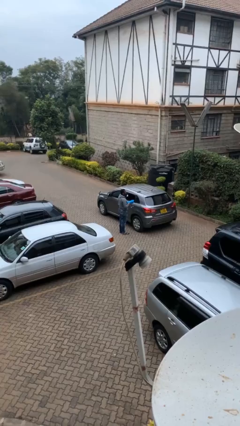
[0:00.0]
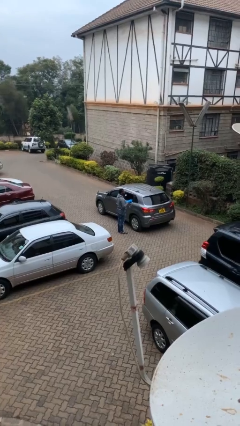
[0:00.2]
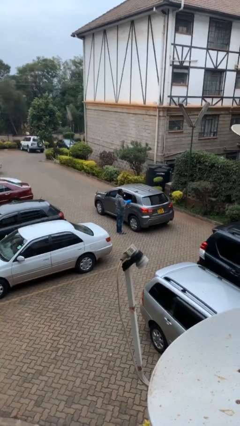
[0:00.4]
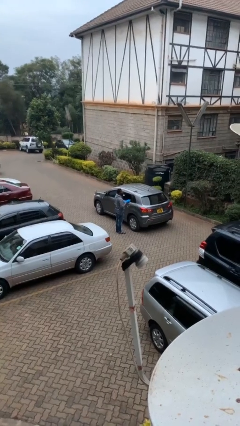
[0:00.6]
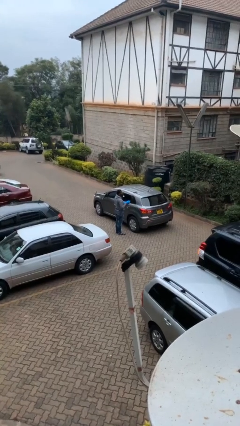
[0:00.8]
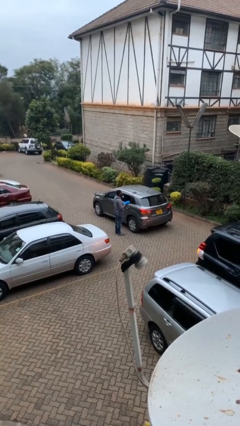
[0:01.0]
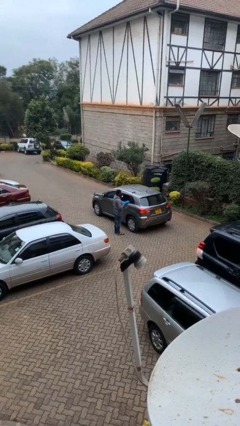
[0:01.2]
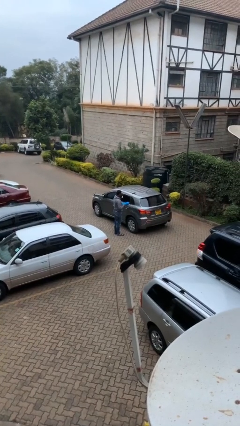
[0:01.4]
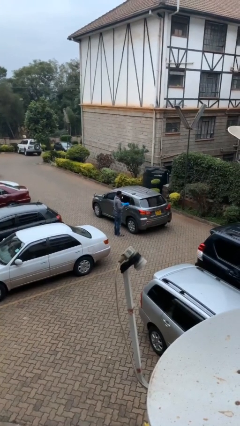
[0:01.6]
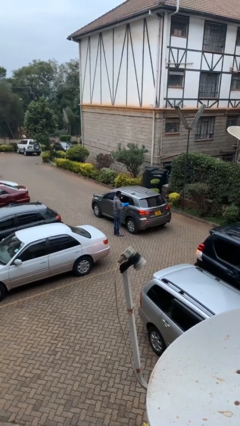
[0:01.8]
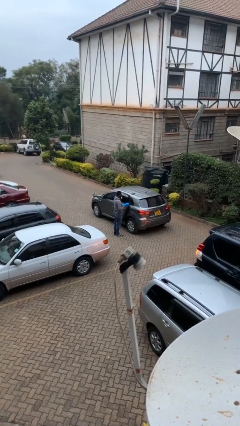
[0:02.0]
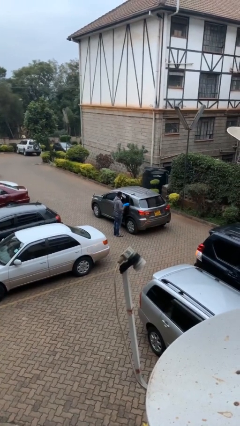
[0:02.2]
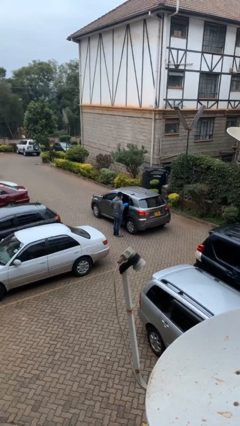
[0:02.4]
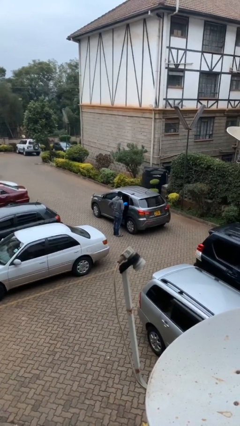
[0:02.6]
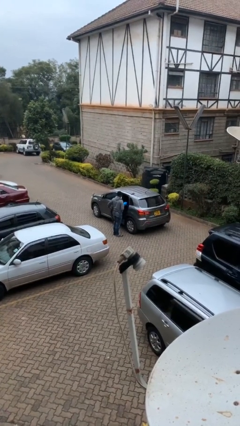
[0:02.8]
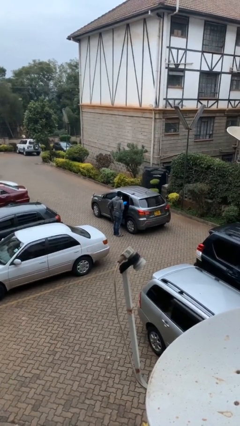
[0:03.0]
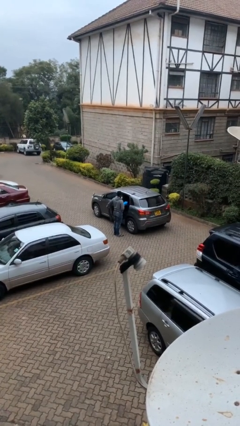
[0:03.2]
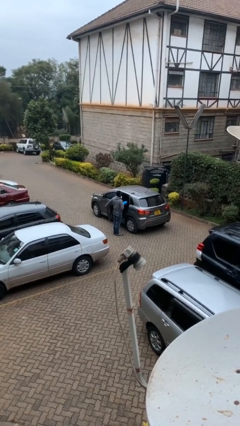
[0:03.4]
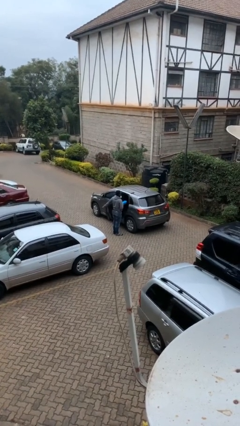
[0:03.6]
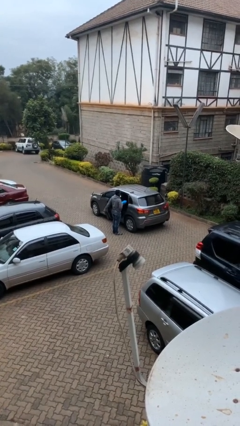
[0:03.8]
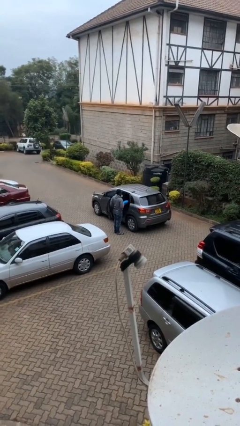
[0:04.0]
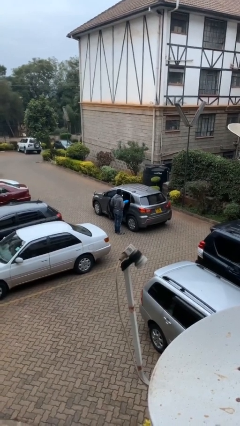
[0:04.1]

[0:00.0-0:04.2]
person opens car door

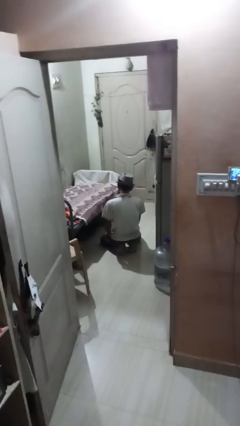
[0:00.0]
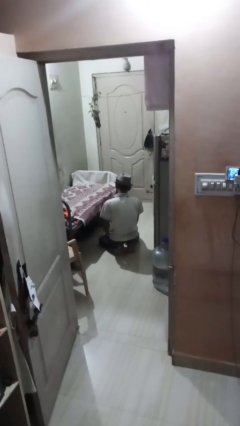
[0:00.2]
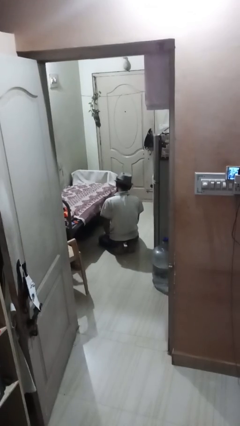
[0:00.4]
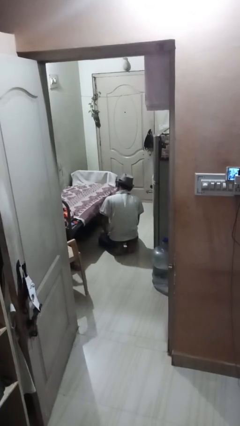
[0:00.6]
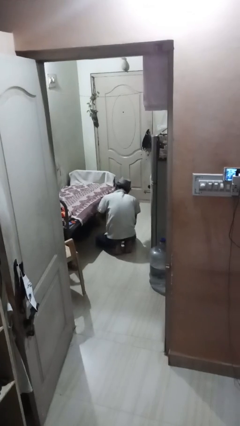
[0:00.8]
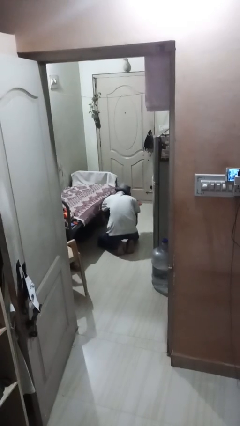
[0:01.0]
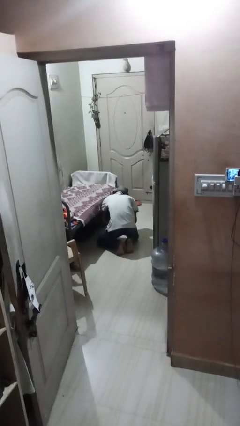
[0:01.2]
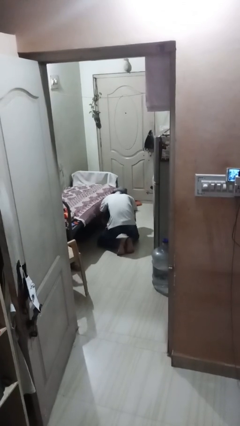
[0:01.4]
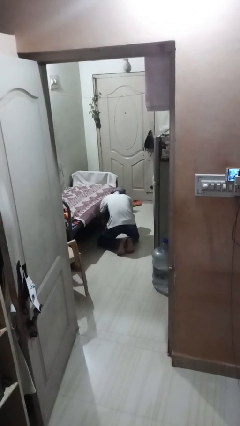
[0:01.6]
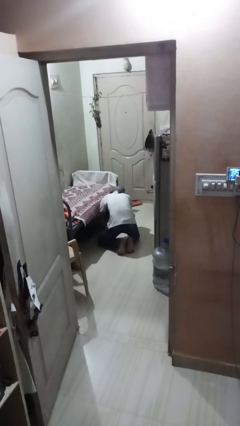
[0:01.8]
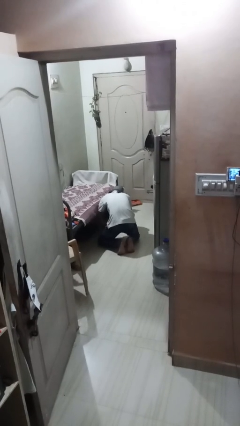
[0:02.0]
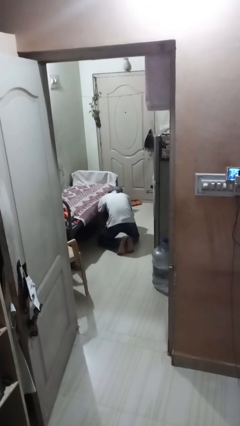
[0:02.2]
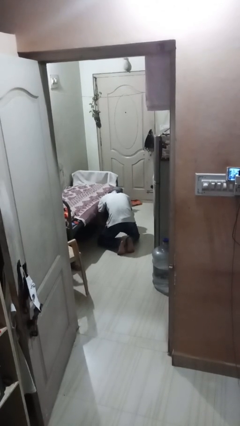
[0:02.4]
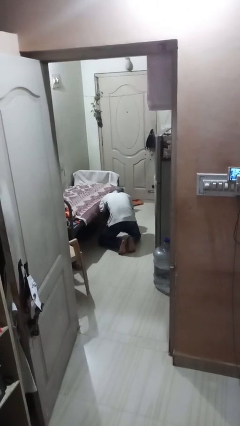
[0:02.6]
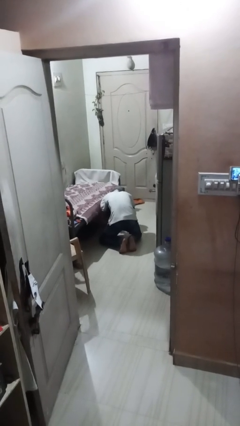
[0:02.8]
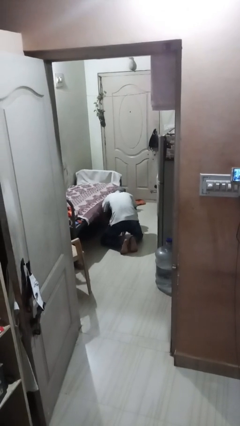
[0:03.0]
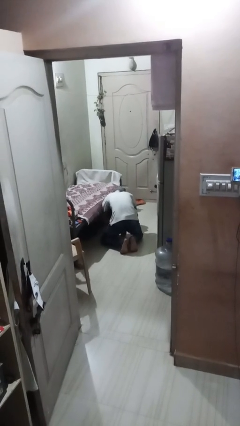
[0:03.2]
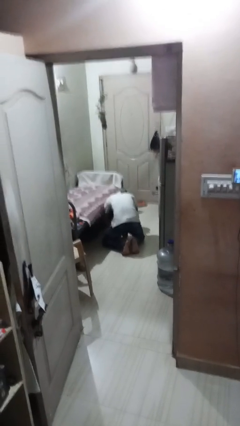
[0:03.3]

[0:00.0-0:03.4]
person searches under bed

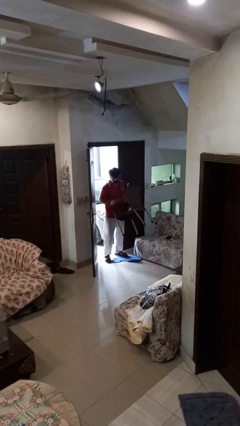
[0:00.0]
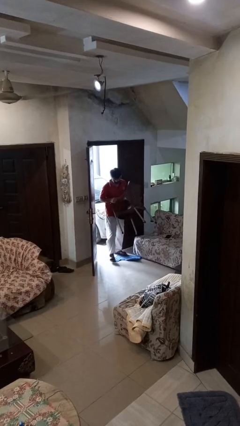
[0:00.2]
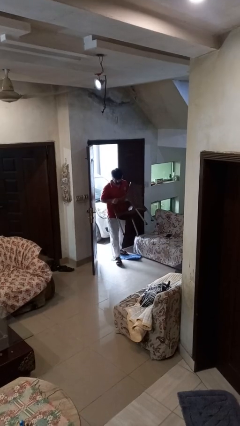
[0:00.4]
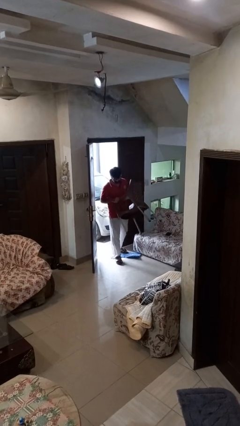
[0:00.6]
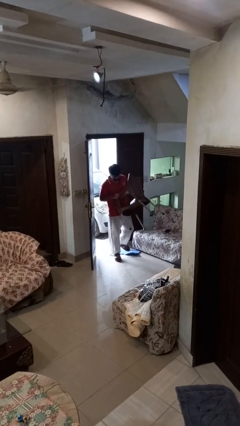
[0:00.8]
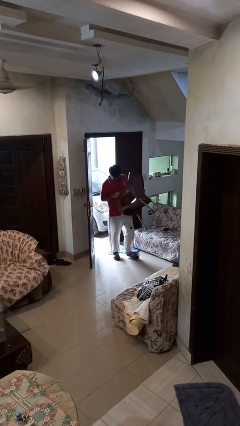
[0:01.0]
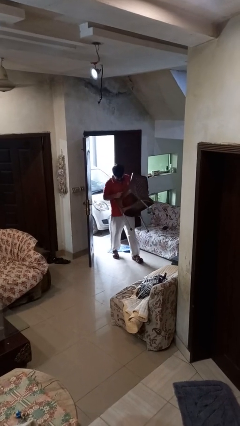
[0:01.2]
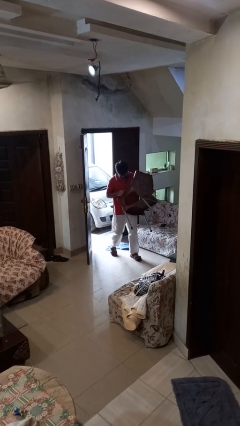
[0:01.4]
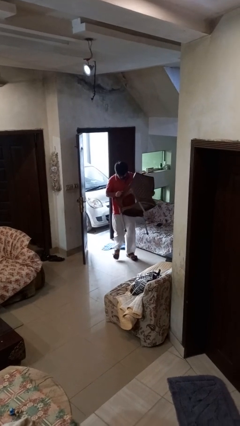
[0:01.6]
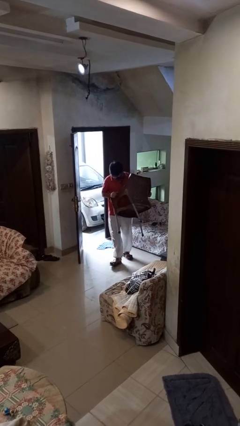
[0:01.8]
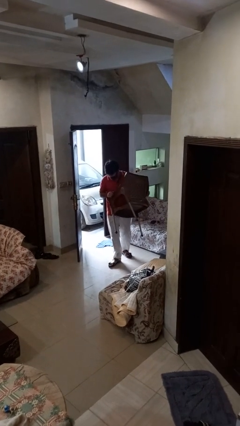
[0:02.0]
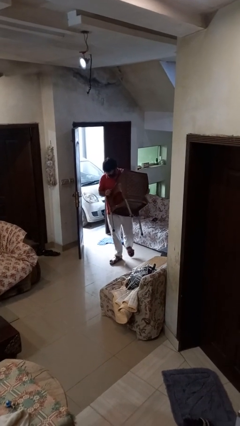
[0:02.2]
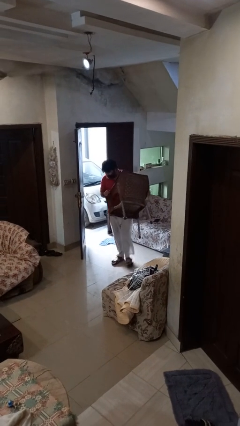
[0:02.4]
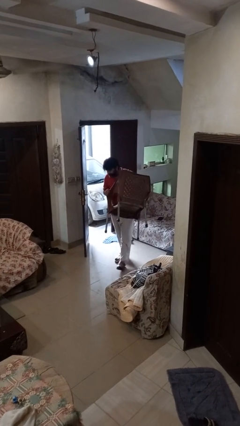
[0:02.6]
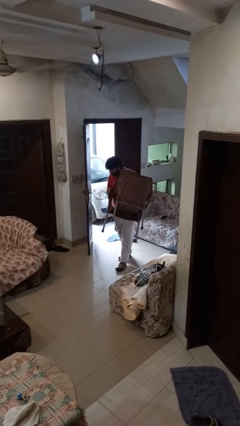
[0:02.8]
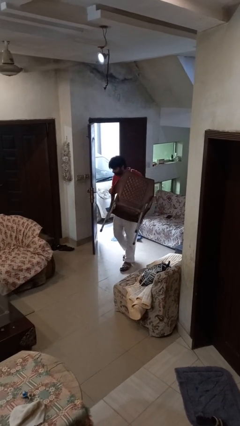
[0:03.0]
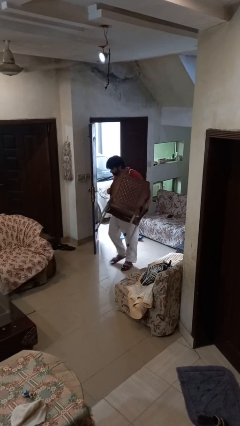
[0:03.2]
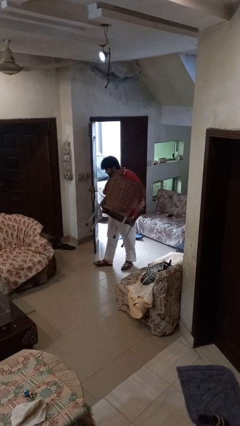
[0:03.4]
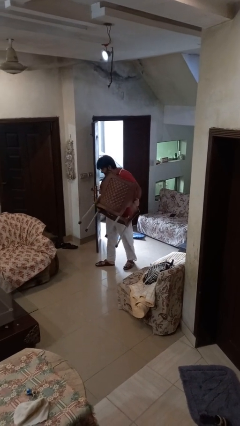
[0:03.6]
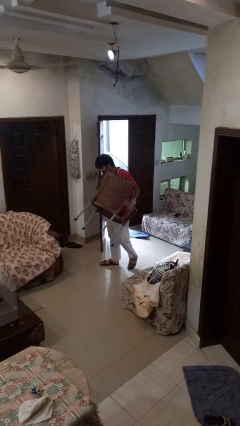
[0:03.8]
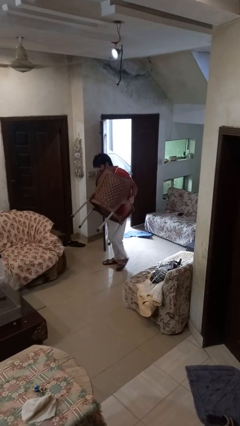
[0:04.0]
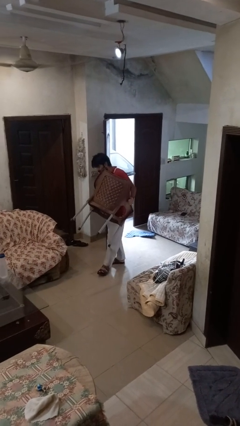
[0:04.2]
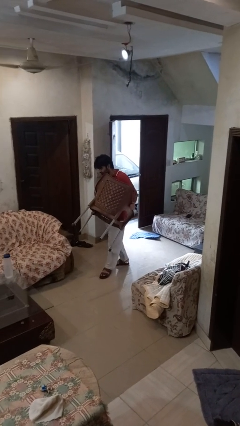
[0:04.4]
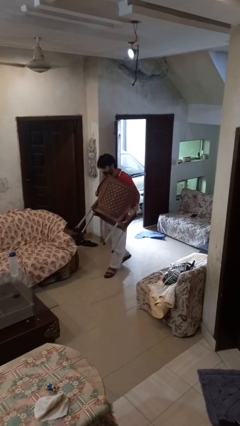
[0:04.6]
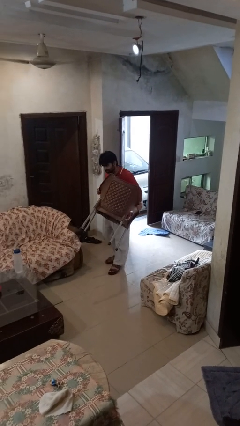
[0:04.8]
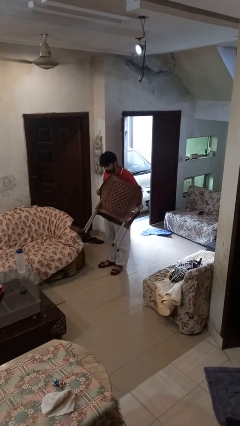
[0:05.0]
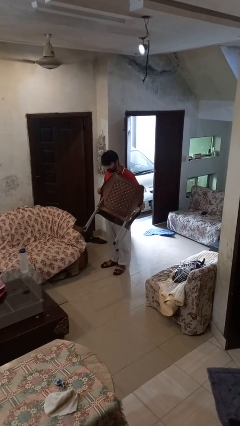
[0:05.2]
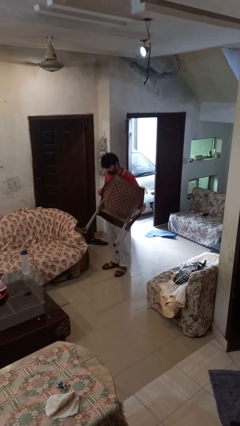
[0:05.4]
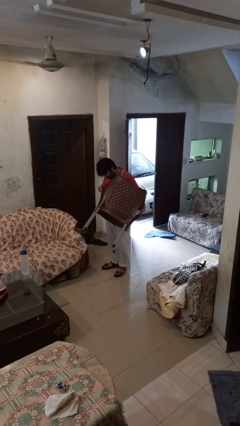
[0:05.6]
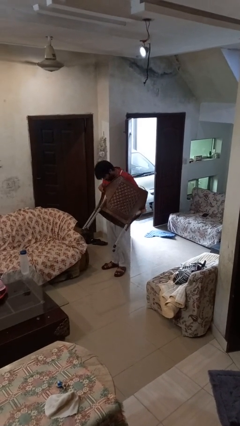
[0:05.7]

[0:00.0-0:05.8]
person carries furniture

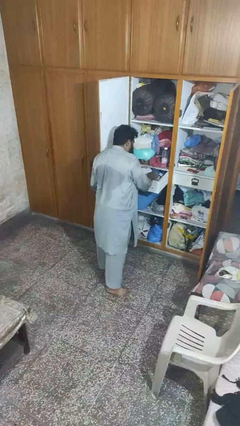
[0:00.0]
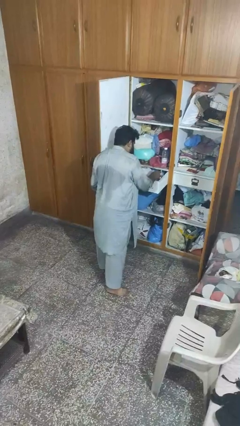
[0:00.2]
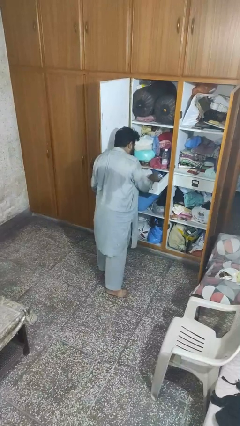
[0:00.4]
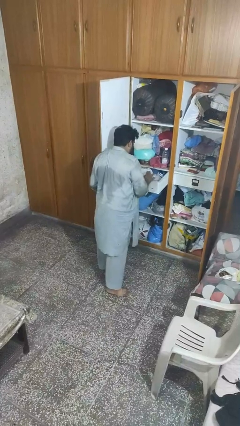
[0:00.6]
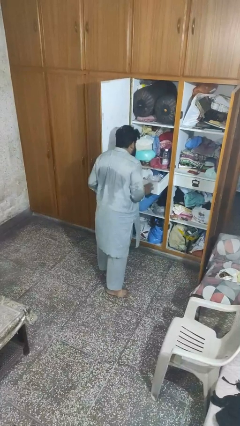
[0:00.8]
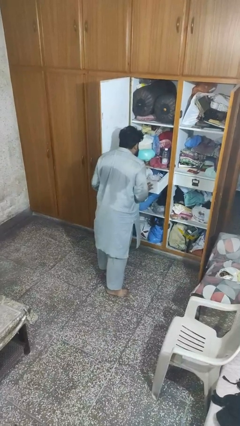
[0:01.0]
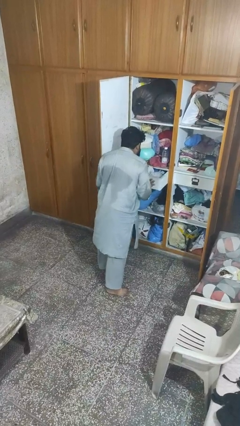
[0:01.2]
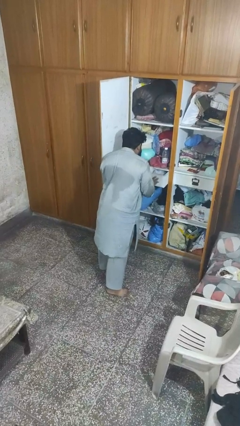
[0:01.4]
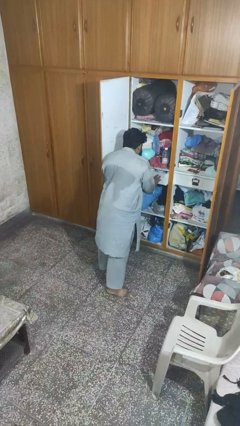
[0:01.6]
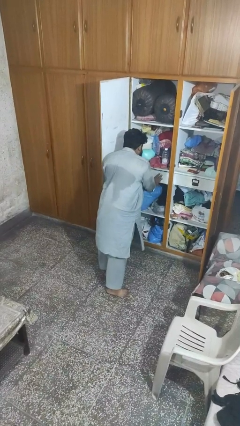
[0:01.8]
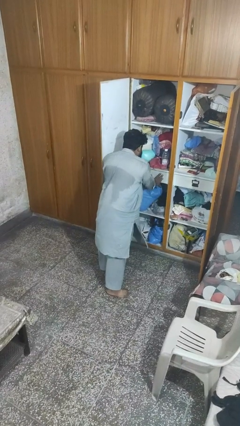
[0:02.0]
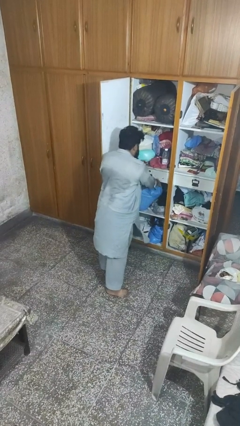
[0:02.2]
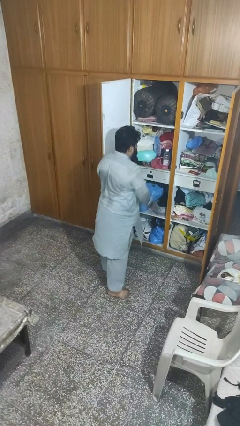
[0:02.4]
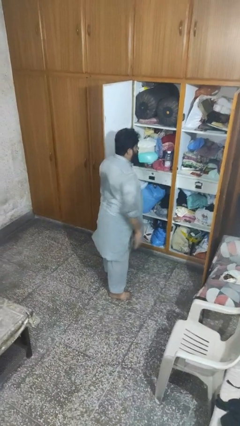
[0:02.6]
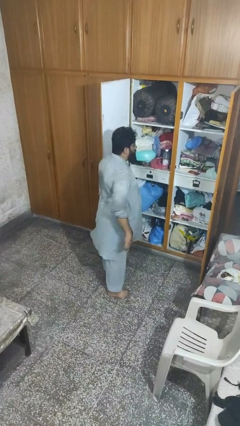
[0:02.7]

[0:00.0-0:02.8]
person closes dresser drawer

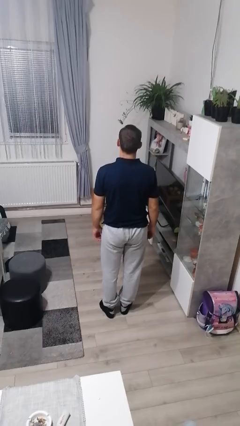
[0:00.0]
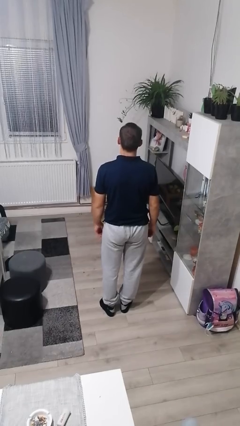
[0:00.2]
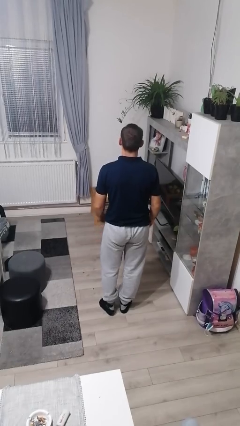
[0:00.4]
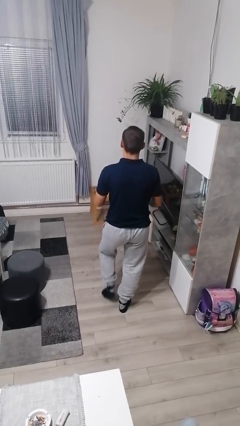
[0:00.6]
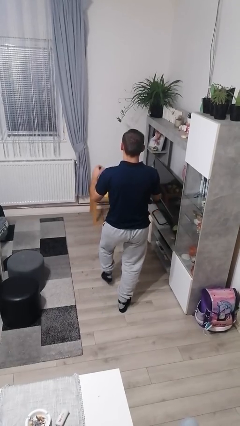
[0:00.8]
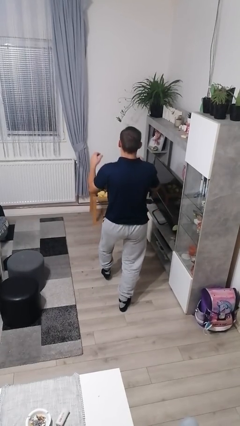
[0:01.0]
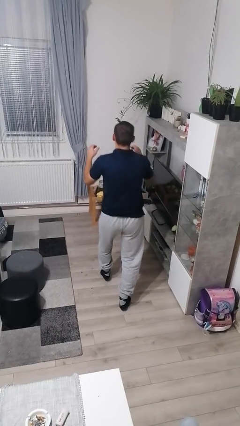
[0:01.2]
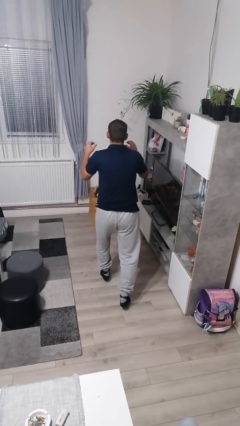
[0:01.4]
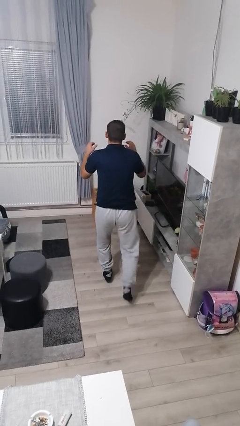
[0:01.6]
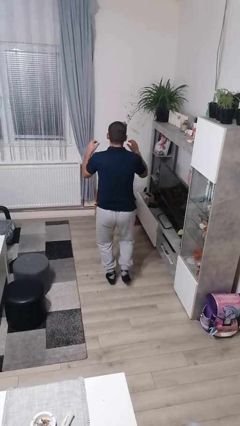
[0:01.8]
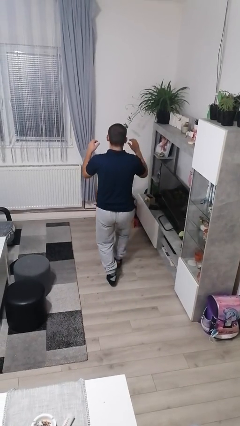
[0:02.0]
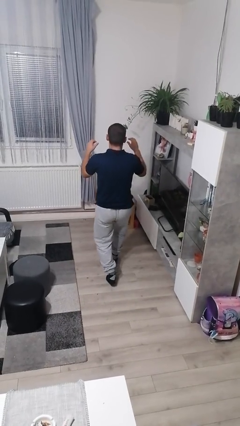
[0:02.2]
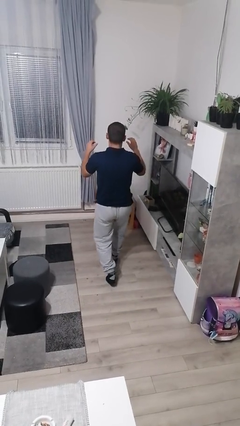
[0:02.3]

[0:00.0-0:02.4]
person walks tiptoe
